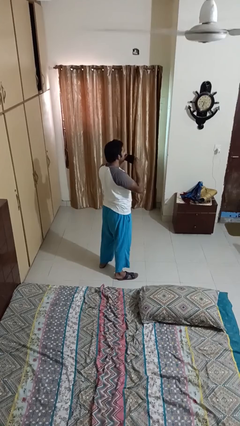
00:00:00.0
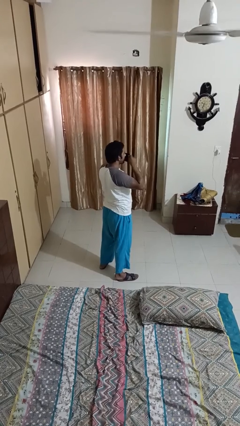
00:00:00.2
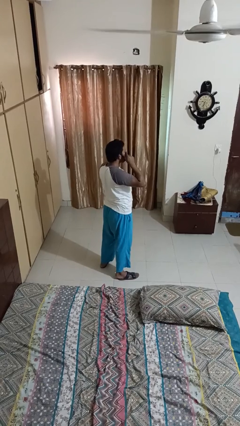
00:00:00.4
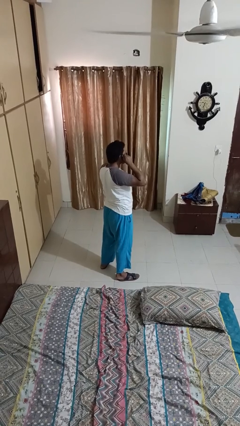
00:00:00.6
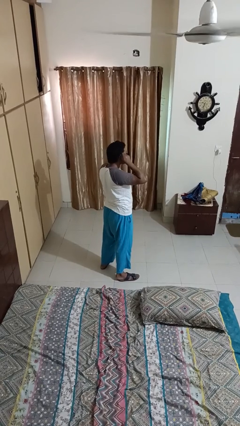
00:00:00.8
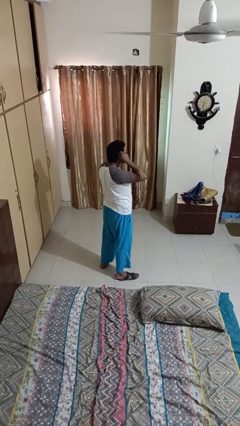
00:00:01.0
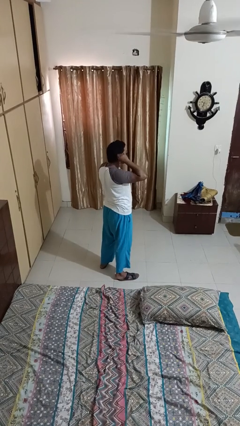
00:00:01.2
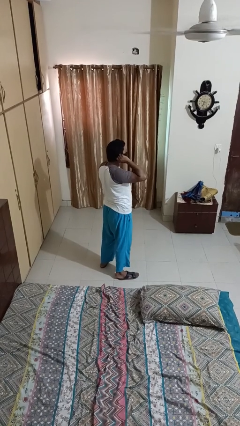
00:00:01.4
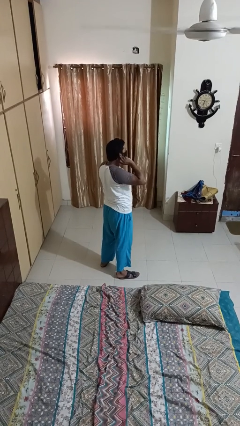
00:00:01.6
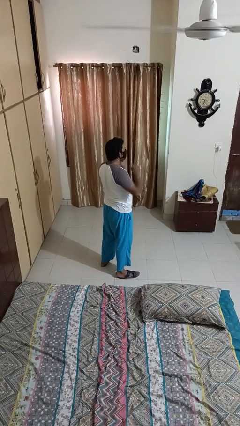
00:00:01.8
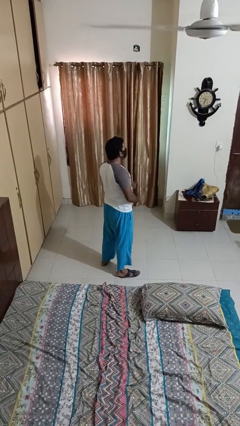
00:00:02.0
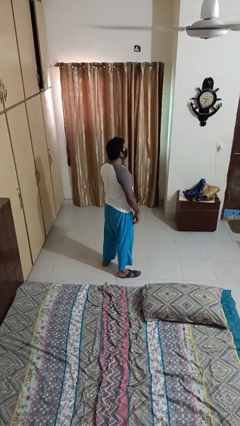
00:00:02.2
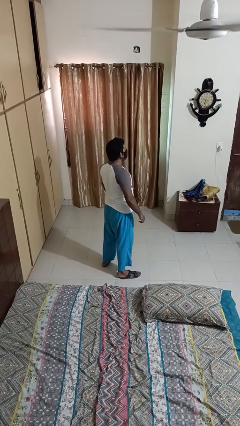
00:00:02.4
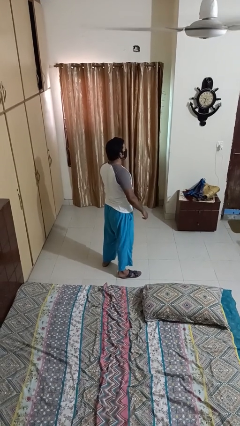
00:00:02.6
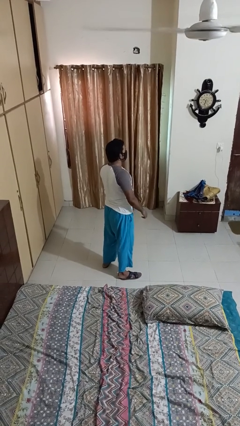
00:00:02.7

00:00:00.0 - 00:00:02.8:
person puts on facemask

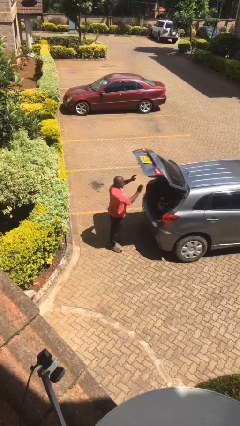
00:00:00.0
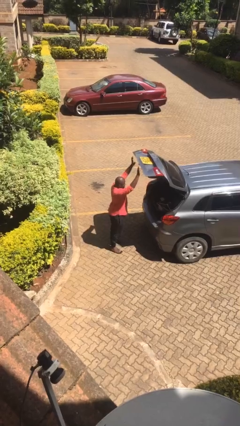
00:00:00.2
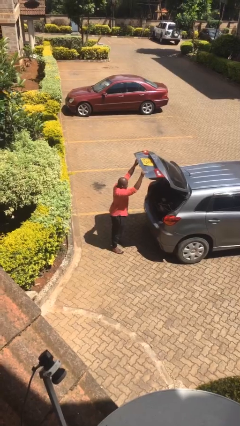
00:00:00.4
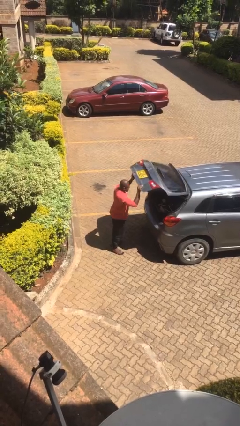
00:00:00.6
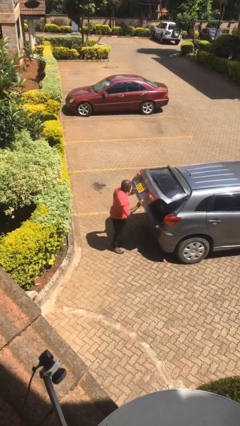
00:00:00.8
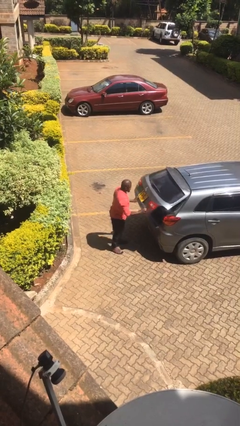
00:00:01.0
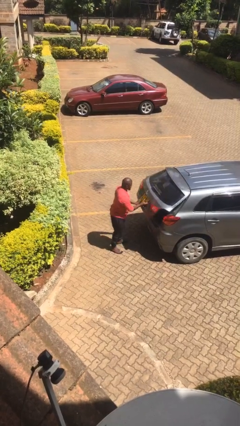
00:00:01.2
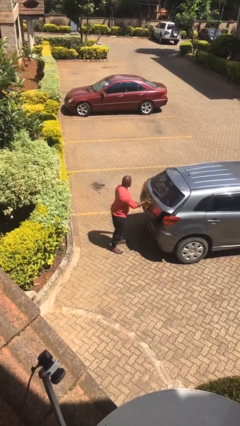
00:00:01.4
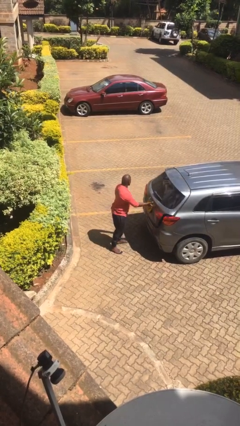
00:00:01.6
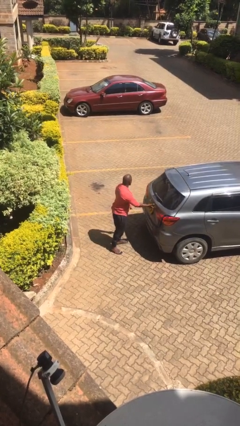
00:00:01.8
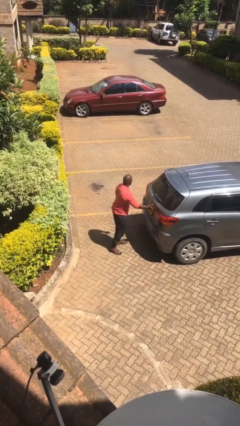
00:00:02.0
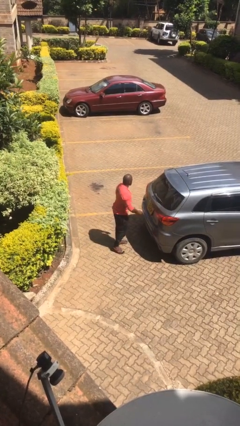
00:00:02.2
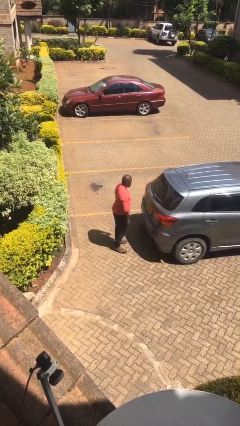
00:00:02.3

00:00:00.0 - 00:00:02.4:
person closes car trunk

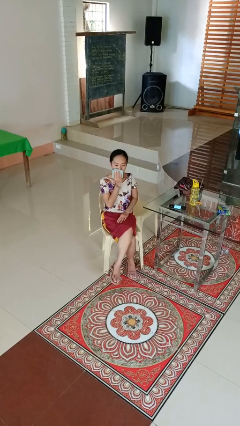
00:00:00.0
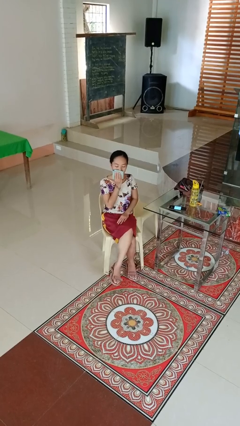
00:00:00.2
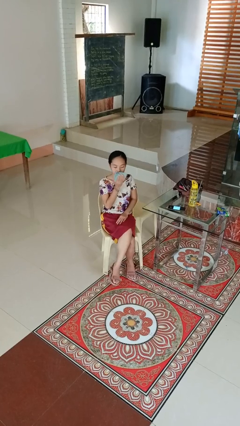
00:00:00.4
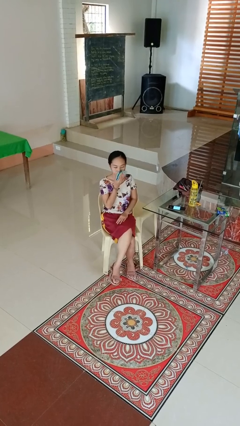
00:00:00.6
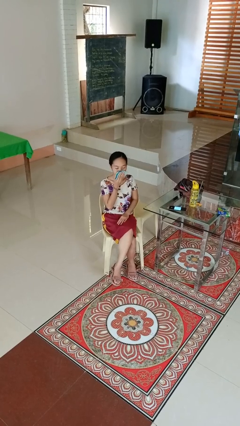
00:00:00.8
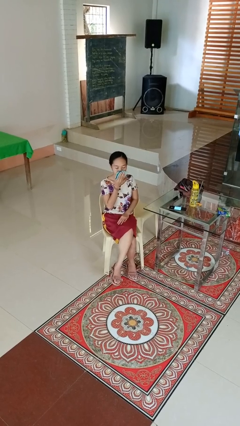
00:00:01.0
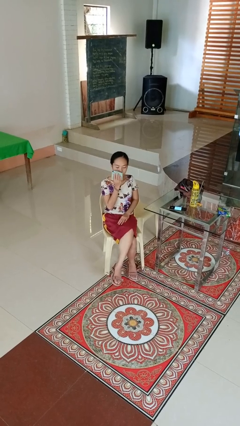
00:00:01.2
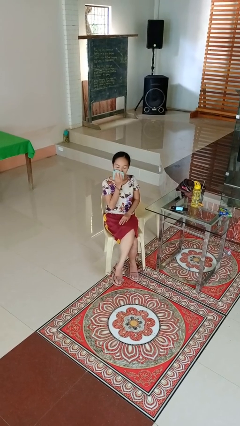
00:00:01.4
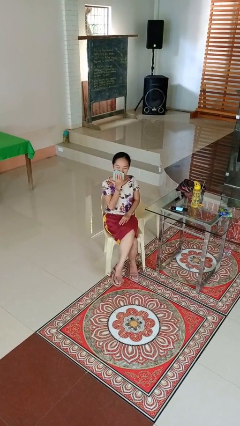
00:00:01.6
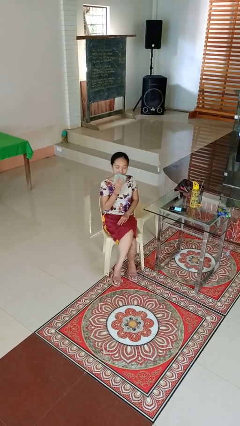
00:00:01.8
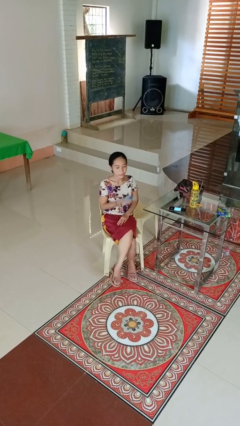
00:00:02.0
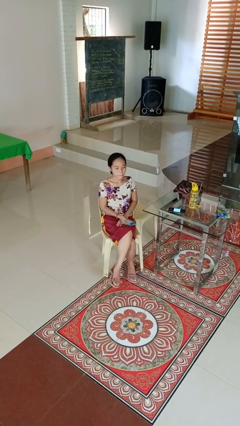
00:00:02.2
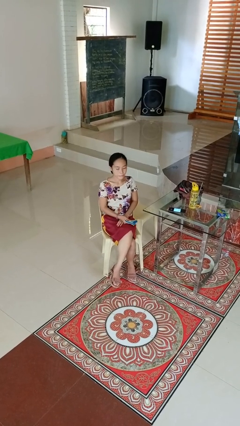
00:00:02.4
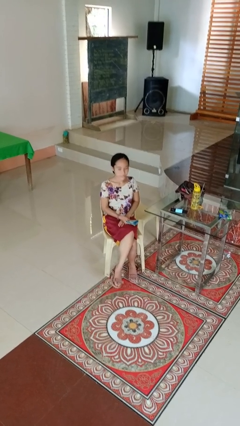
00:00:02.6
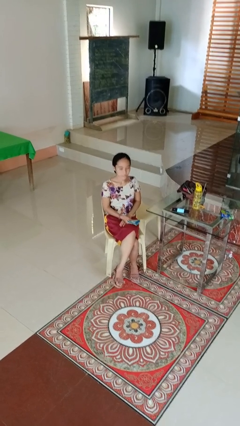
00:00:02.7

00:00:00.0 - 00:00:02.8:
person wipes mouth with napkin

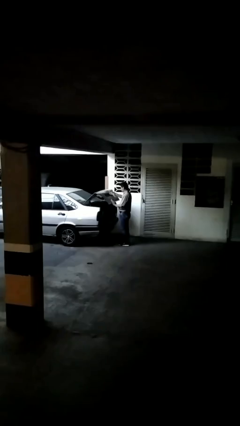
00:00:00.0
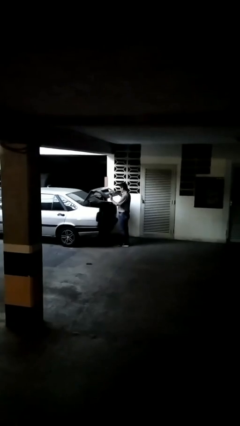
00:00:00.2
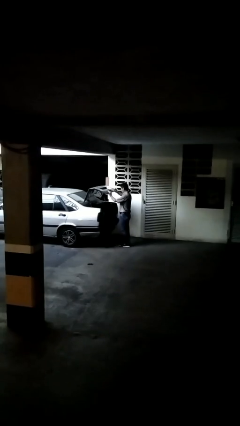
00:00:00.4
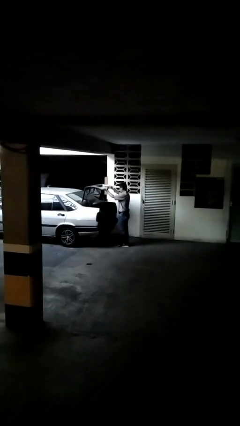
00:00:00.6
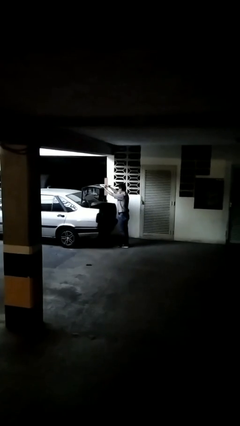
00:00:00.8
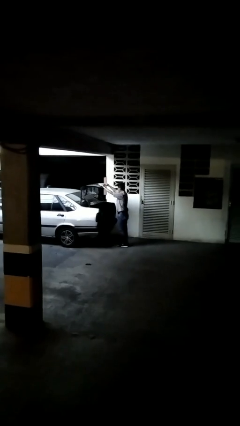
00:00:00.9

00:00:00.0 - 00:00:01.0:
person opens car trunk

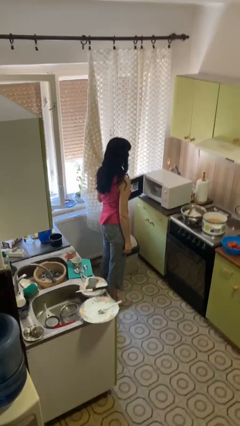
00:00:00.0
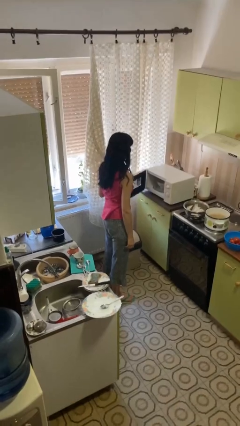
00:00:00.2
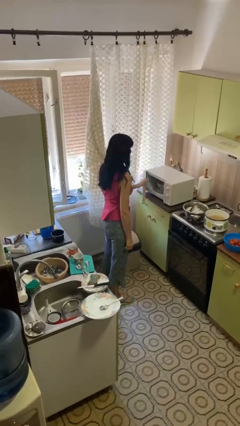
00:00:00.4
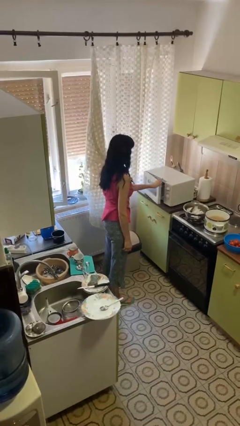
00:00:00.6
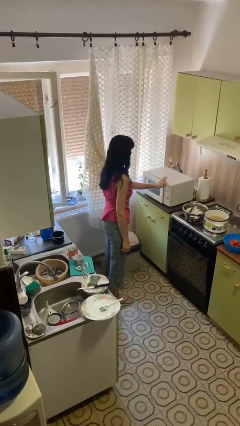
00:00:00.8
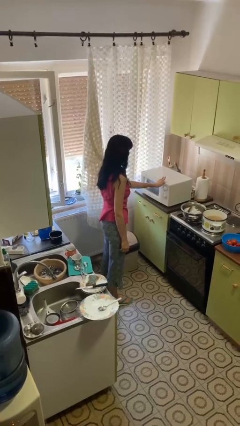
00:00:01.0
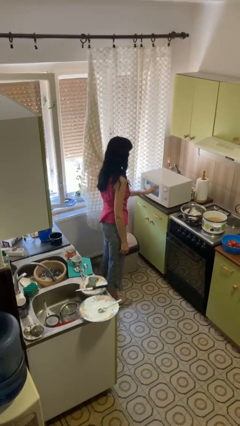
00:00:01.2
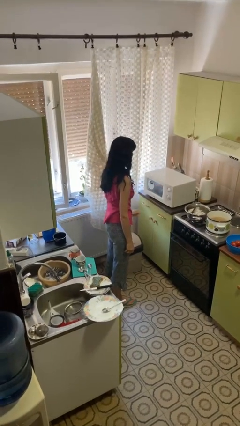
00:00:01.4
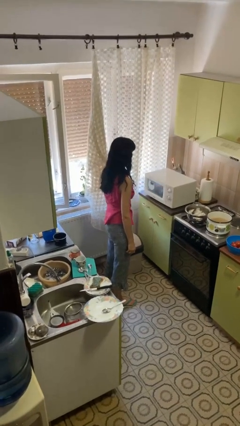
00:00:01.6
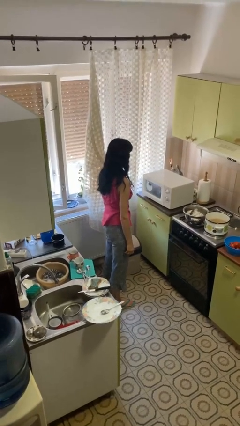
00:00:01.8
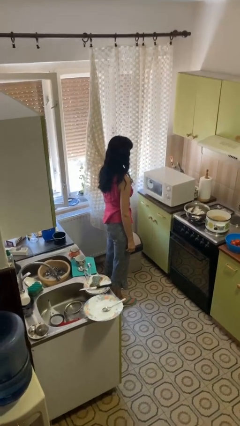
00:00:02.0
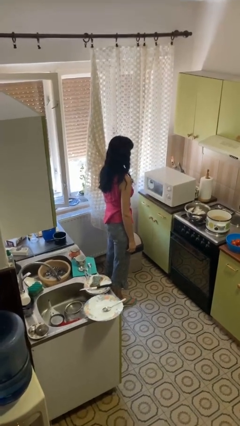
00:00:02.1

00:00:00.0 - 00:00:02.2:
person closes microwave

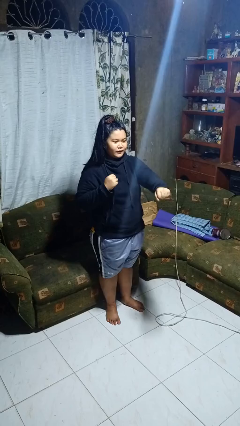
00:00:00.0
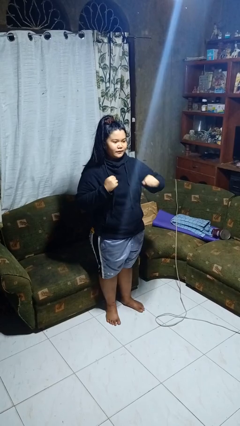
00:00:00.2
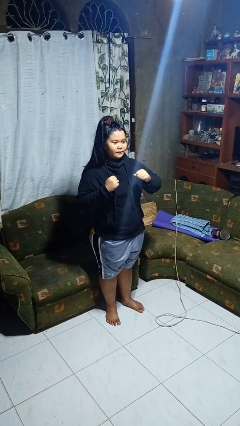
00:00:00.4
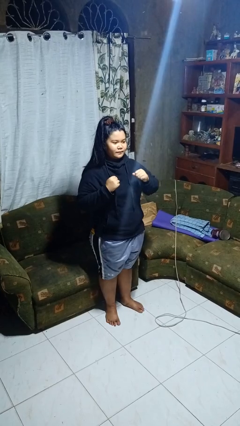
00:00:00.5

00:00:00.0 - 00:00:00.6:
person punches

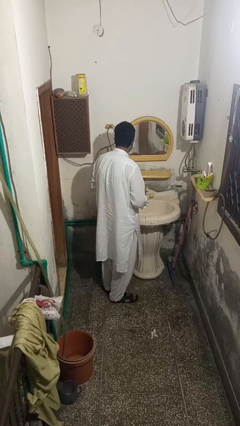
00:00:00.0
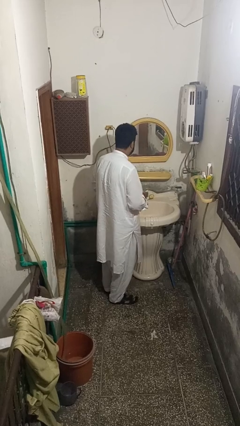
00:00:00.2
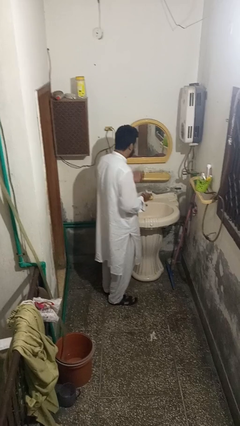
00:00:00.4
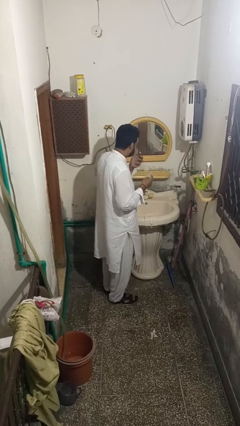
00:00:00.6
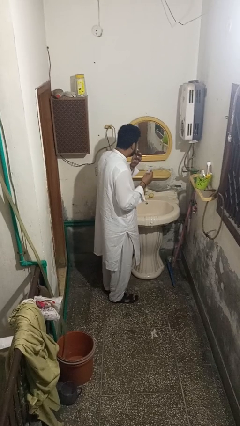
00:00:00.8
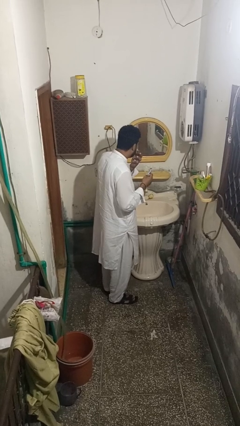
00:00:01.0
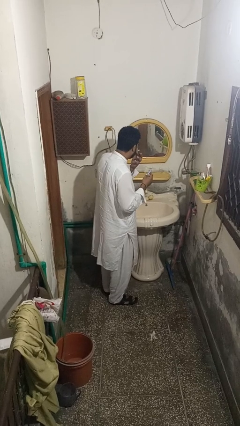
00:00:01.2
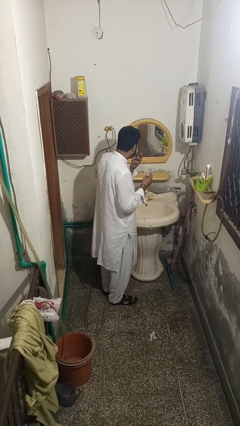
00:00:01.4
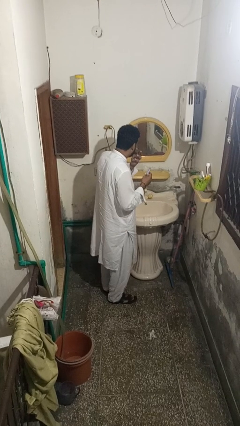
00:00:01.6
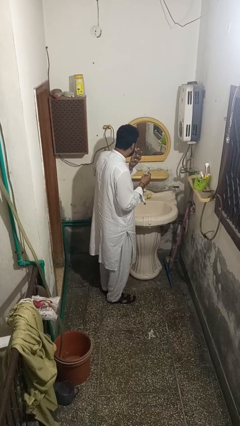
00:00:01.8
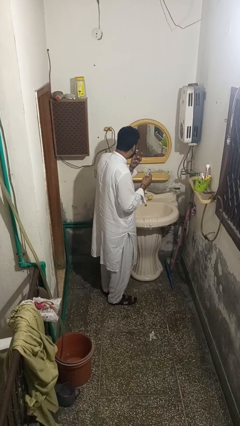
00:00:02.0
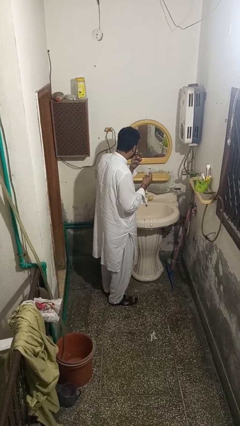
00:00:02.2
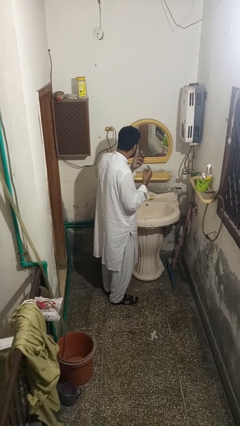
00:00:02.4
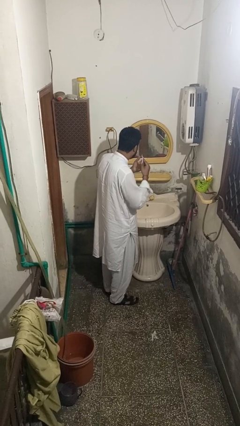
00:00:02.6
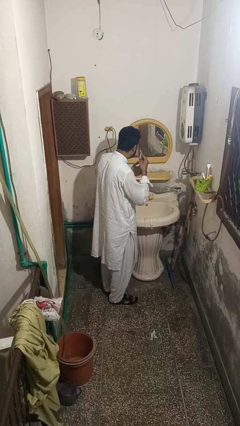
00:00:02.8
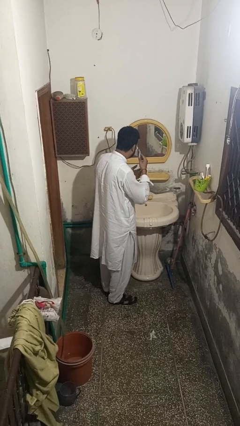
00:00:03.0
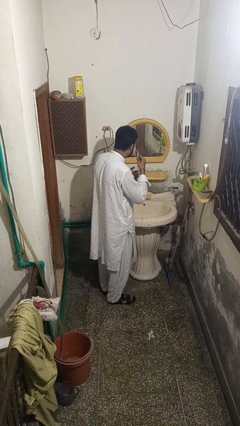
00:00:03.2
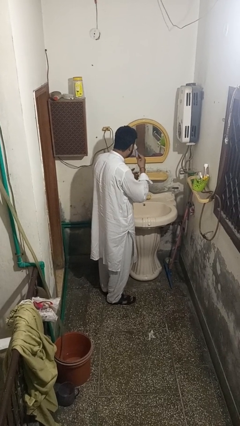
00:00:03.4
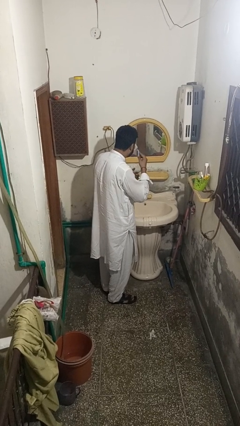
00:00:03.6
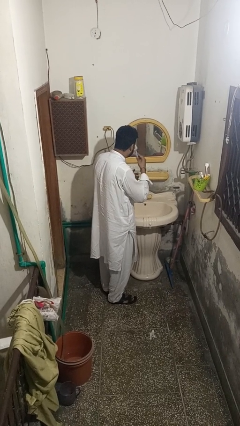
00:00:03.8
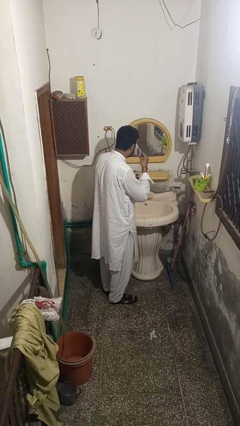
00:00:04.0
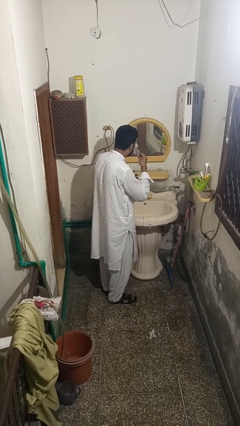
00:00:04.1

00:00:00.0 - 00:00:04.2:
person applies shaving cream

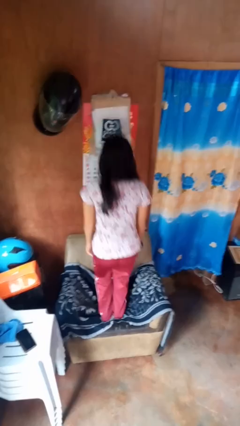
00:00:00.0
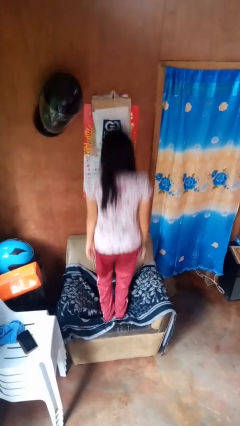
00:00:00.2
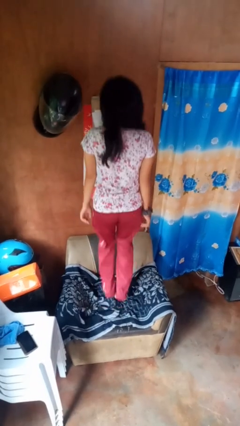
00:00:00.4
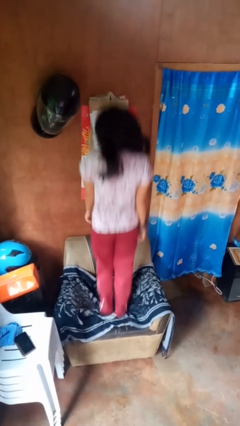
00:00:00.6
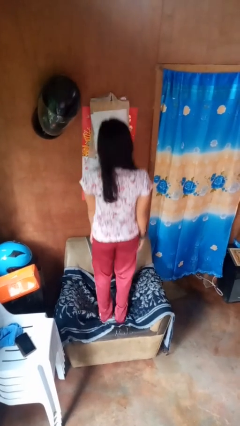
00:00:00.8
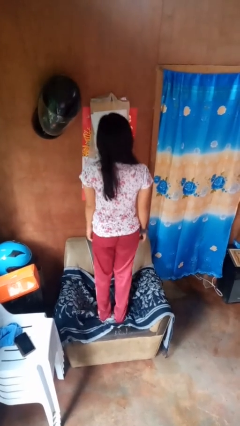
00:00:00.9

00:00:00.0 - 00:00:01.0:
person jumps on couch
